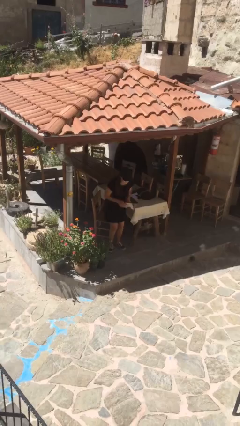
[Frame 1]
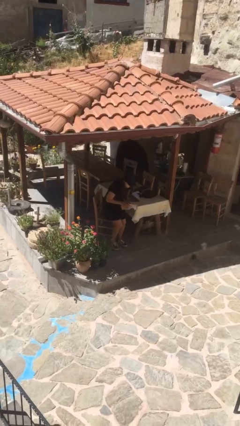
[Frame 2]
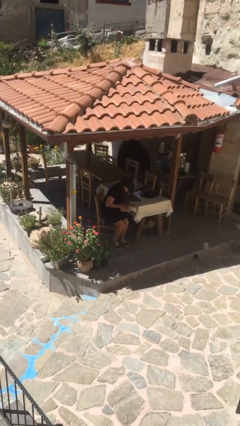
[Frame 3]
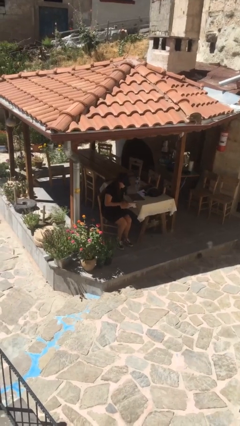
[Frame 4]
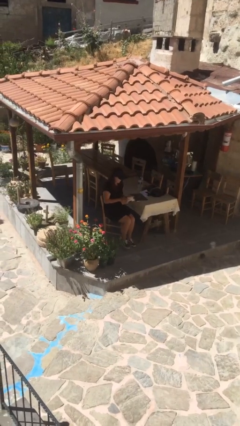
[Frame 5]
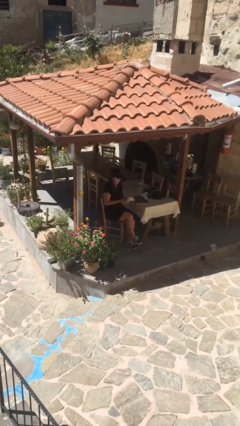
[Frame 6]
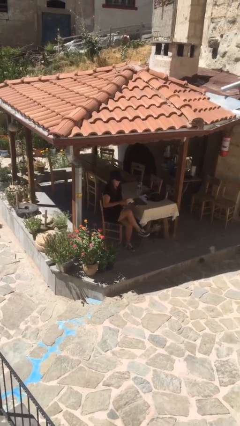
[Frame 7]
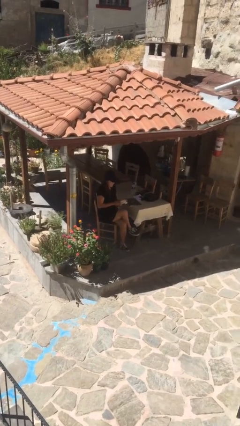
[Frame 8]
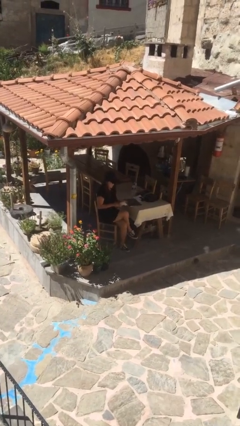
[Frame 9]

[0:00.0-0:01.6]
person sits down

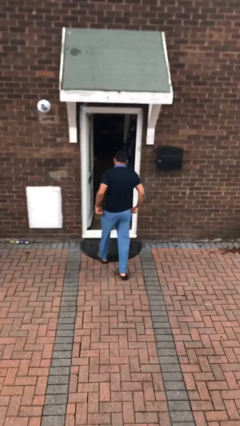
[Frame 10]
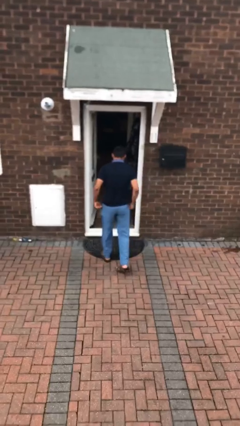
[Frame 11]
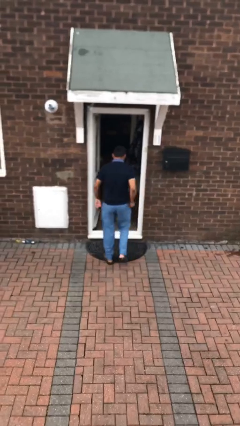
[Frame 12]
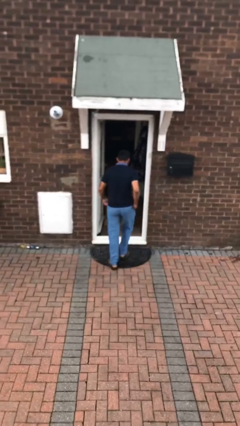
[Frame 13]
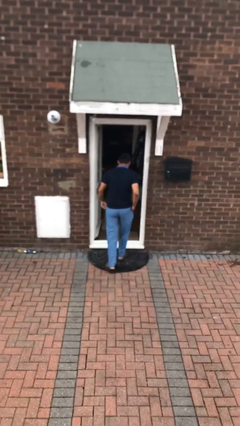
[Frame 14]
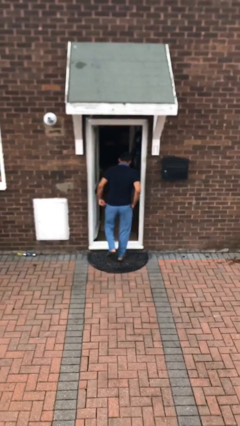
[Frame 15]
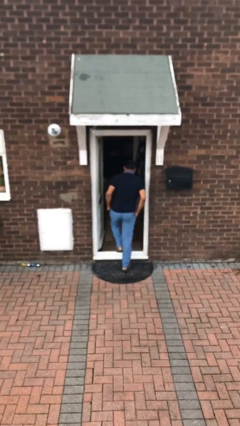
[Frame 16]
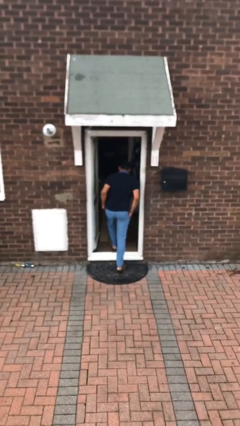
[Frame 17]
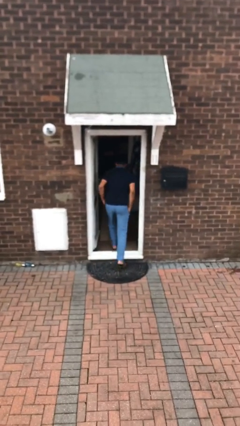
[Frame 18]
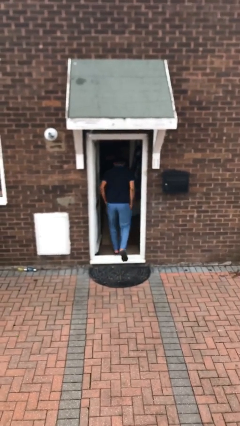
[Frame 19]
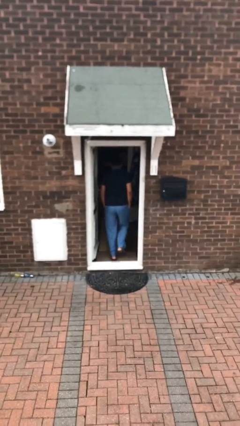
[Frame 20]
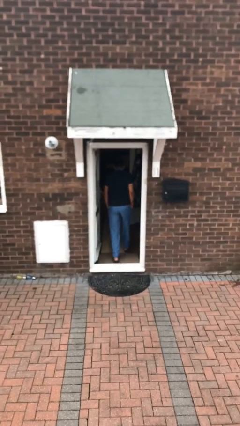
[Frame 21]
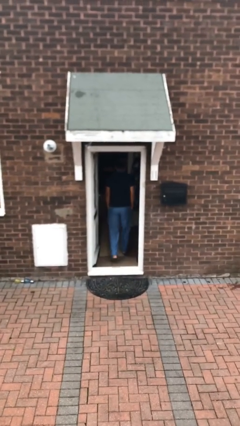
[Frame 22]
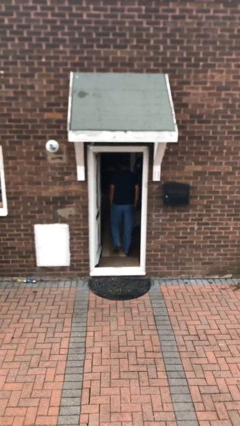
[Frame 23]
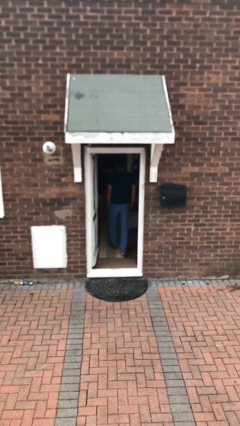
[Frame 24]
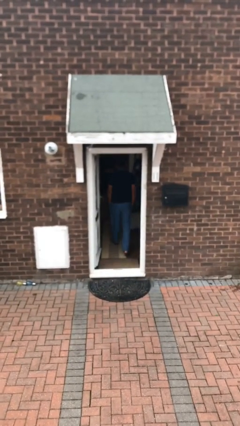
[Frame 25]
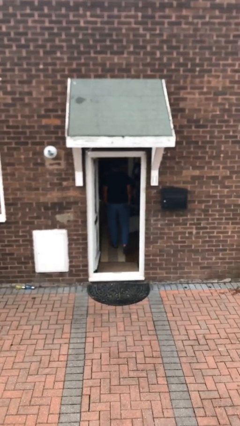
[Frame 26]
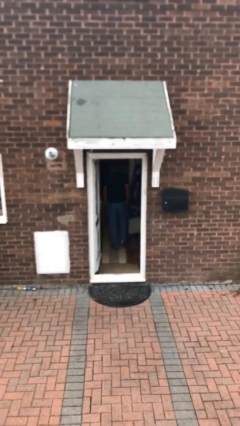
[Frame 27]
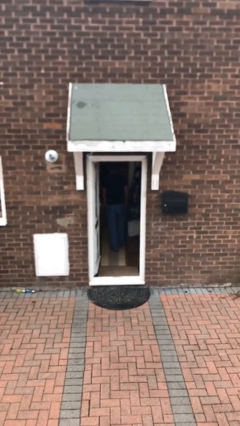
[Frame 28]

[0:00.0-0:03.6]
person exits scene through structure

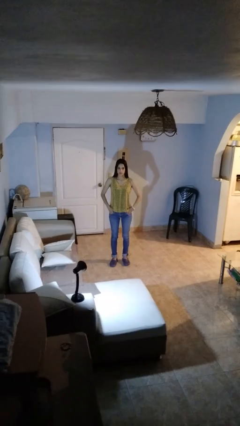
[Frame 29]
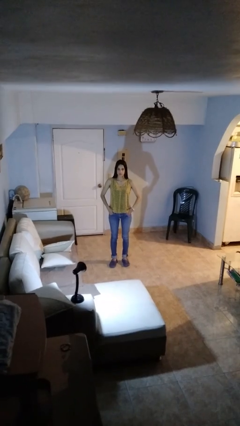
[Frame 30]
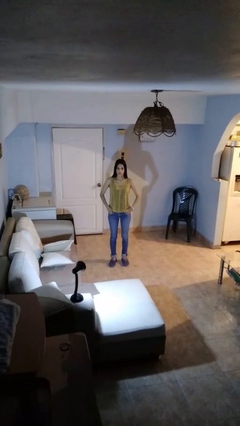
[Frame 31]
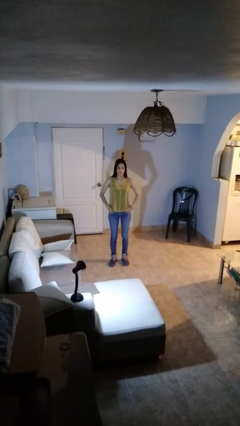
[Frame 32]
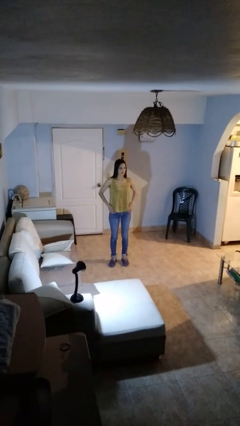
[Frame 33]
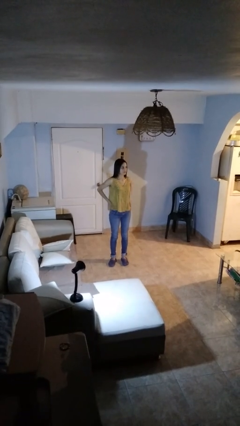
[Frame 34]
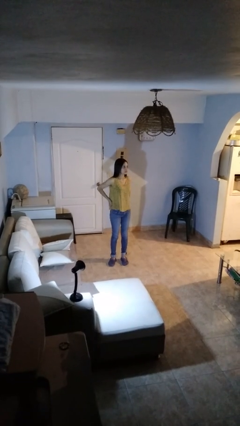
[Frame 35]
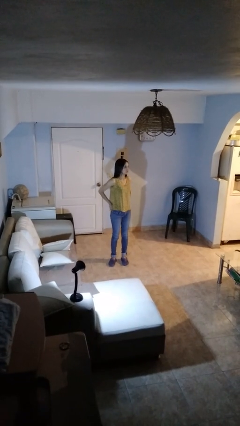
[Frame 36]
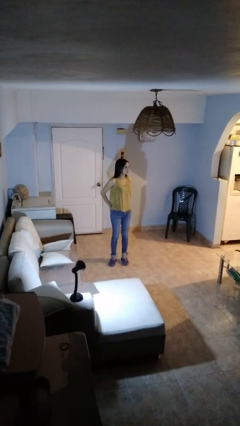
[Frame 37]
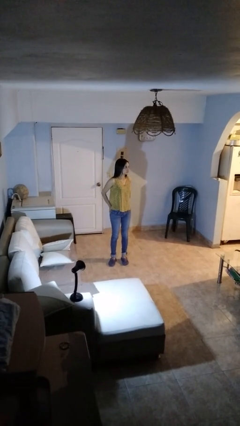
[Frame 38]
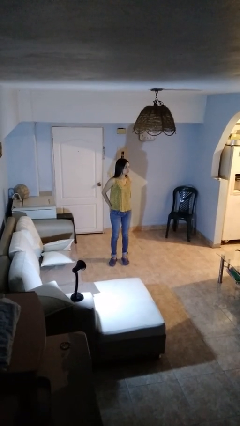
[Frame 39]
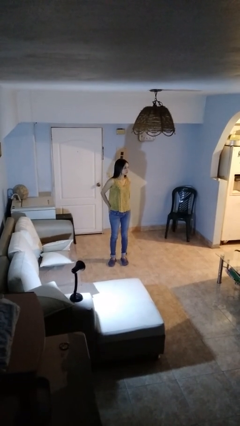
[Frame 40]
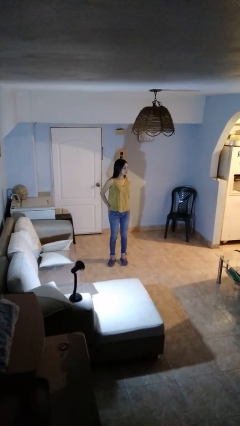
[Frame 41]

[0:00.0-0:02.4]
person puts hands in back pockets

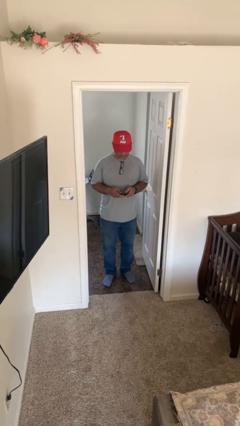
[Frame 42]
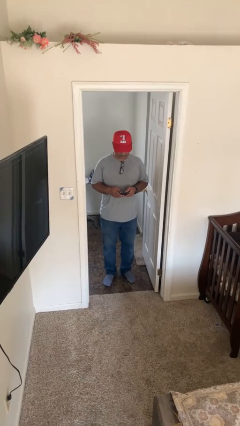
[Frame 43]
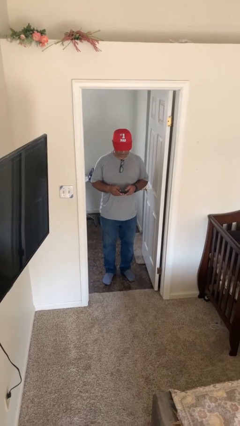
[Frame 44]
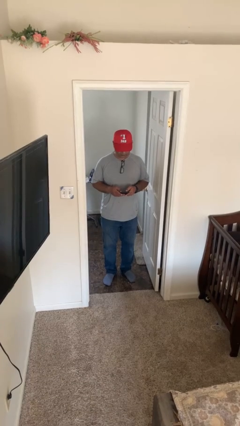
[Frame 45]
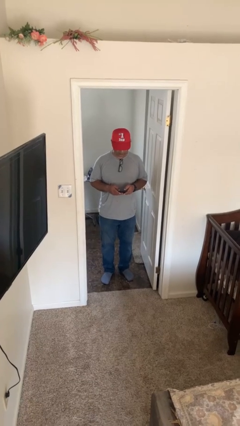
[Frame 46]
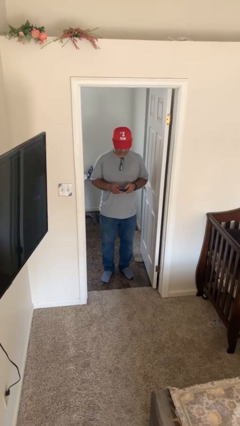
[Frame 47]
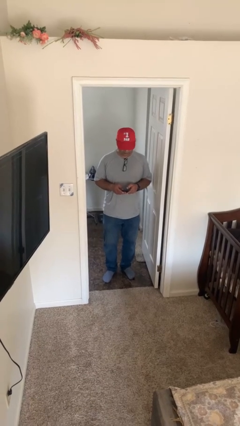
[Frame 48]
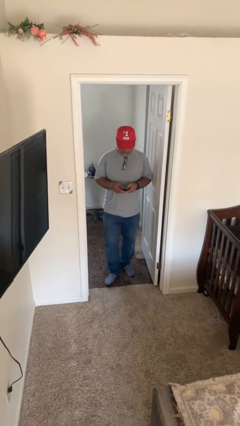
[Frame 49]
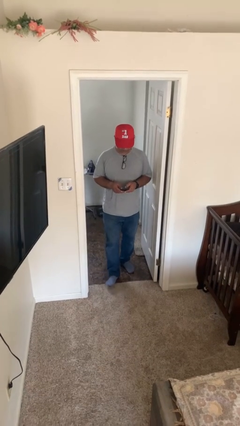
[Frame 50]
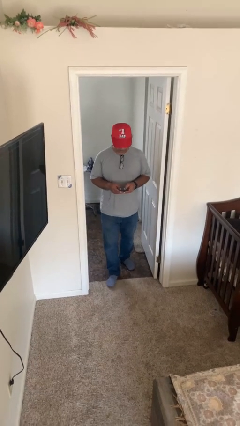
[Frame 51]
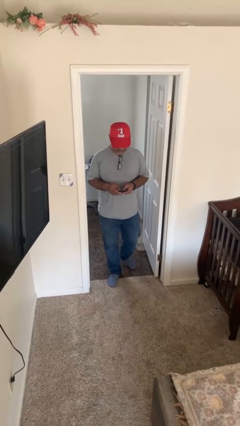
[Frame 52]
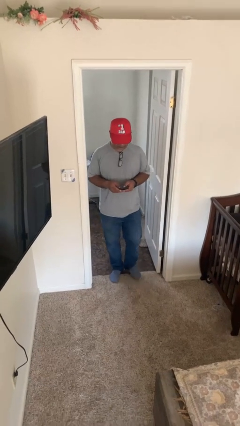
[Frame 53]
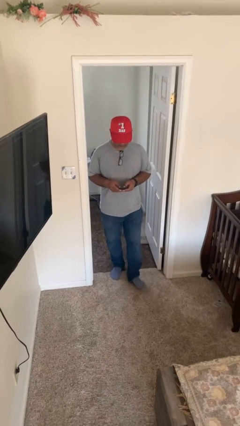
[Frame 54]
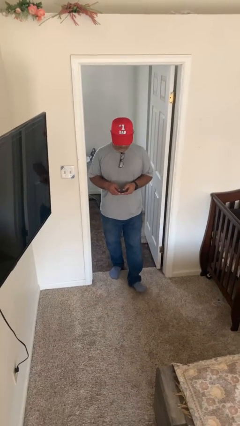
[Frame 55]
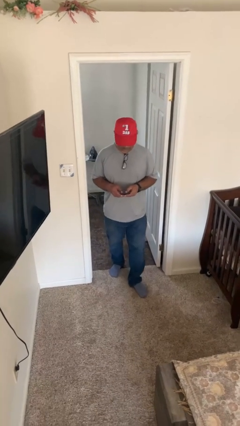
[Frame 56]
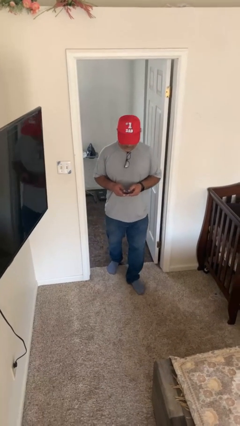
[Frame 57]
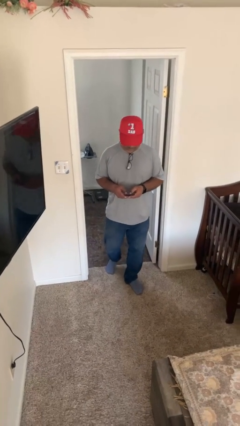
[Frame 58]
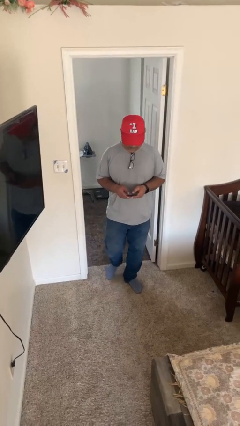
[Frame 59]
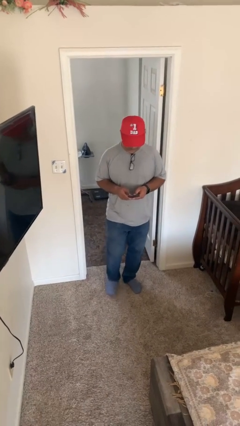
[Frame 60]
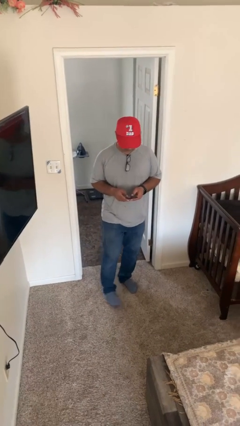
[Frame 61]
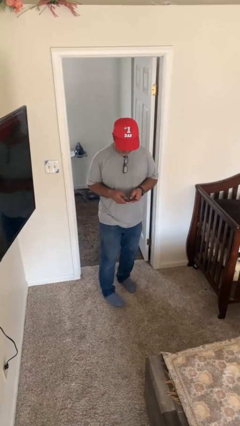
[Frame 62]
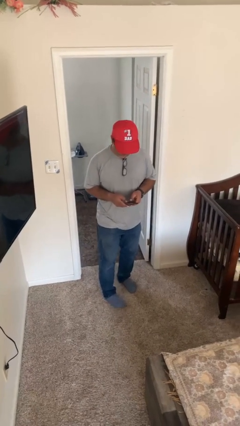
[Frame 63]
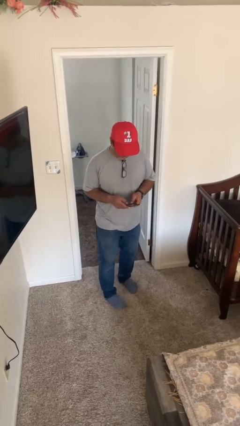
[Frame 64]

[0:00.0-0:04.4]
person enters scene through structure

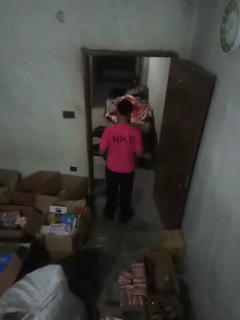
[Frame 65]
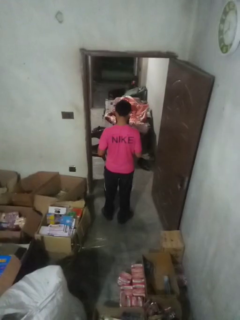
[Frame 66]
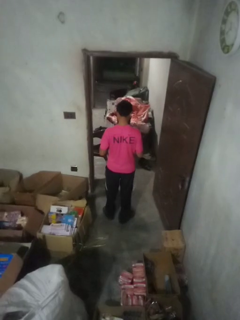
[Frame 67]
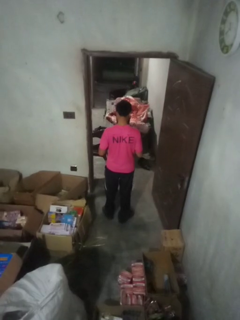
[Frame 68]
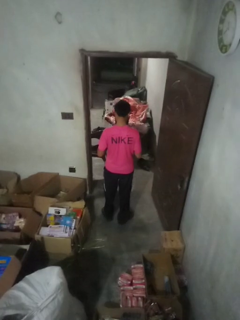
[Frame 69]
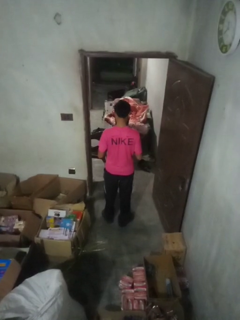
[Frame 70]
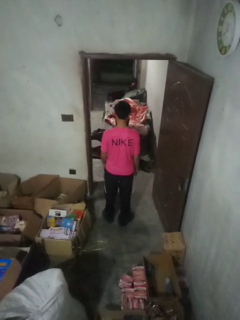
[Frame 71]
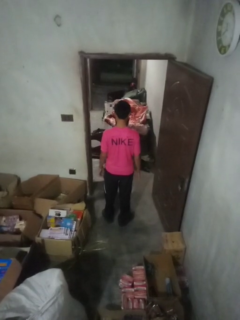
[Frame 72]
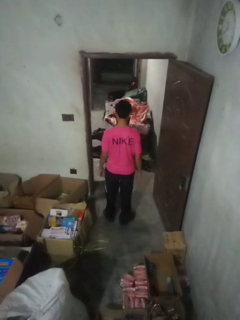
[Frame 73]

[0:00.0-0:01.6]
person unbuttons shirt

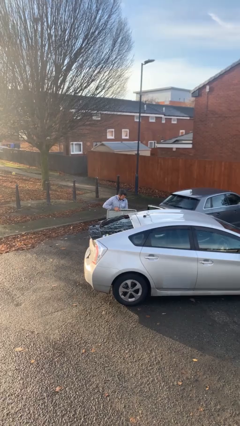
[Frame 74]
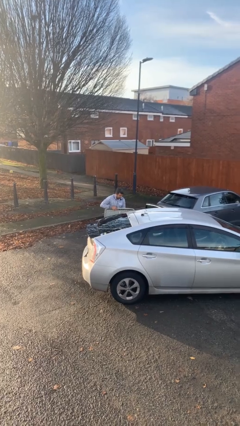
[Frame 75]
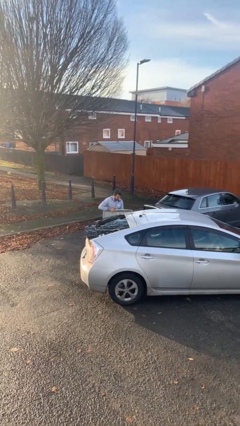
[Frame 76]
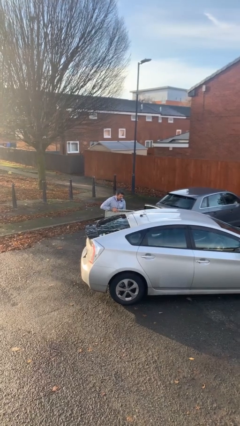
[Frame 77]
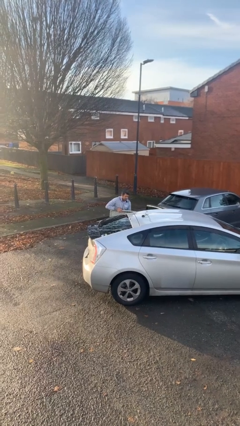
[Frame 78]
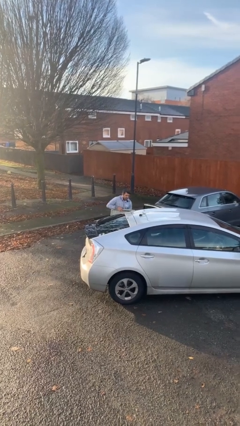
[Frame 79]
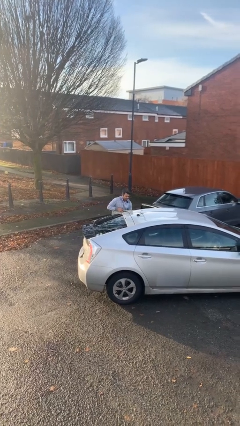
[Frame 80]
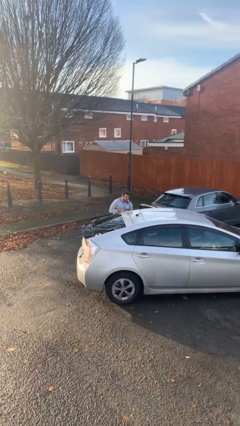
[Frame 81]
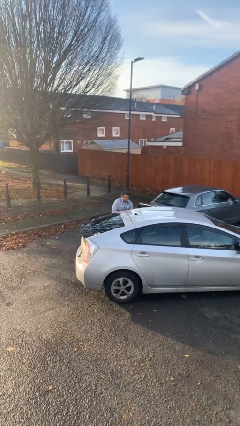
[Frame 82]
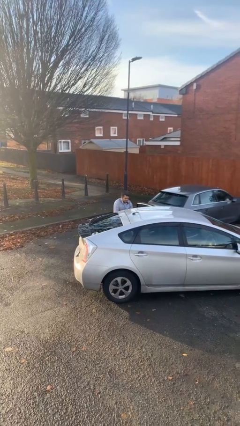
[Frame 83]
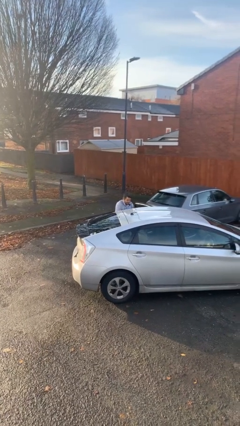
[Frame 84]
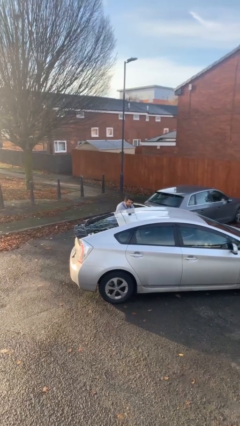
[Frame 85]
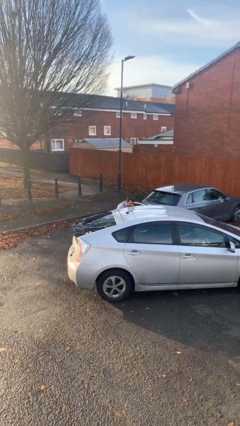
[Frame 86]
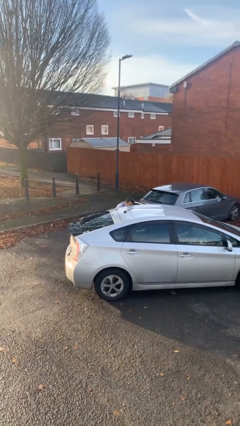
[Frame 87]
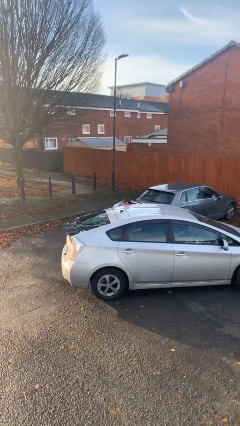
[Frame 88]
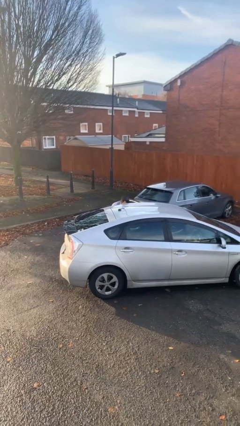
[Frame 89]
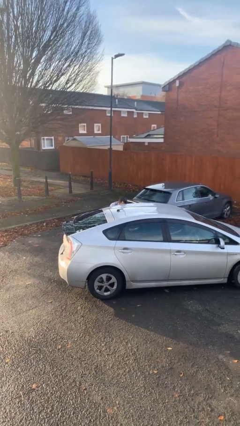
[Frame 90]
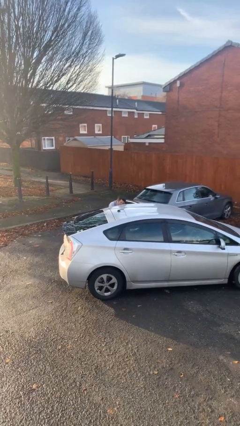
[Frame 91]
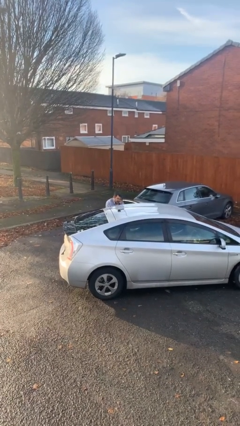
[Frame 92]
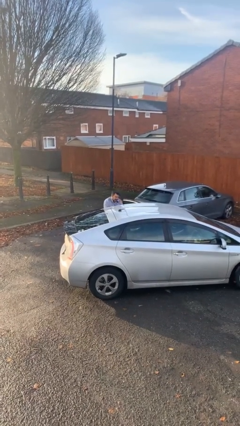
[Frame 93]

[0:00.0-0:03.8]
person loads car
